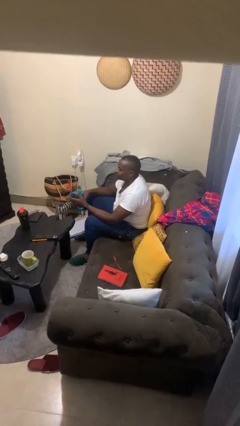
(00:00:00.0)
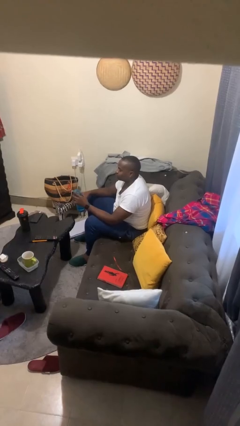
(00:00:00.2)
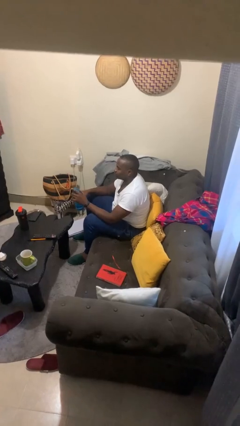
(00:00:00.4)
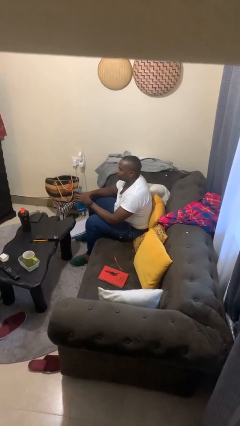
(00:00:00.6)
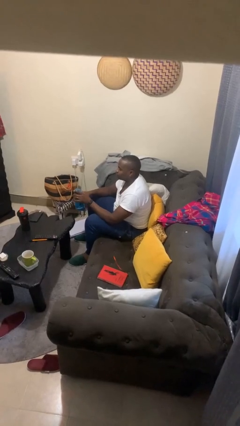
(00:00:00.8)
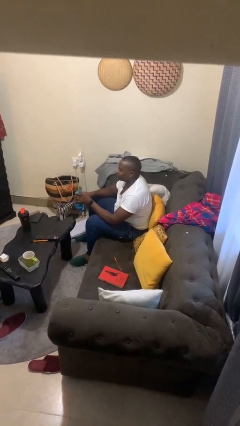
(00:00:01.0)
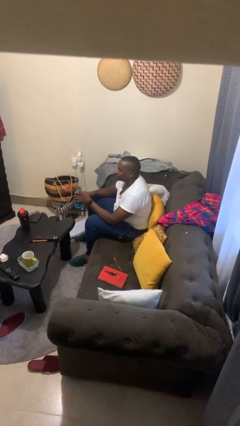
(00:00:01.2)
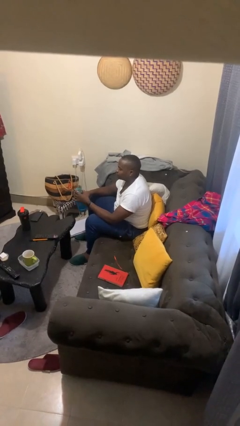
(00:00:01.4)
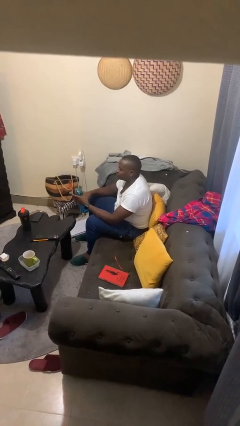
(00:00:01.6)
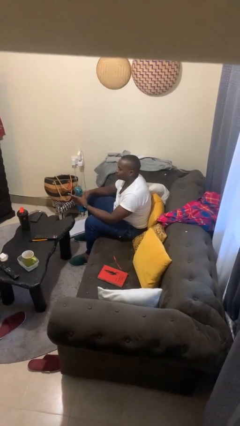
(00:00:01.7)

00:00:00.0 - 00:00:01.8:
person screws lid to bottle

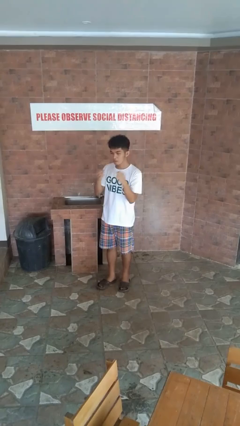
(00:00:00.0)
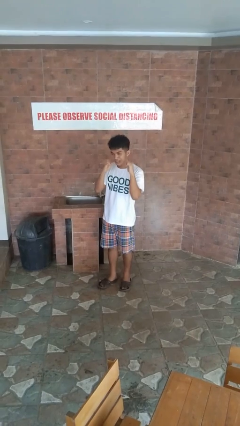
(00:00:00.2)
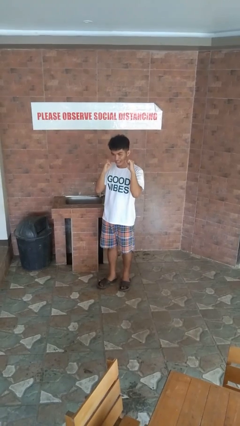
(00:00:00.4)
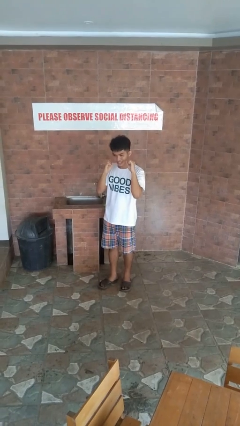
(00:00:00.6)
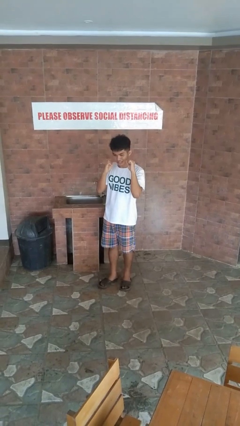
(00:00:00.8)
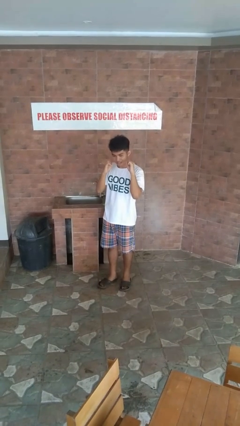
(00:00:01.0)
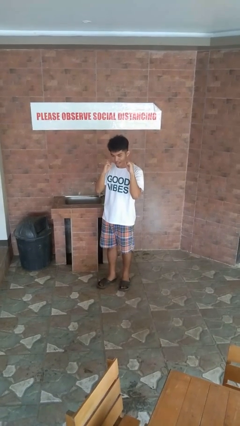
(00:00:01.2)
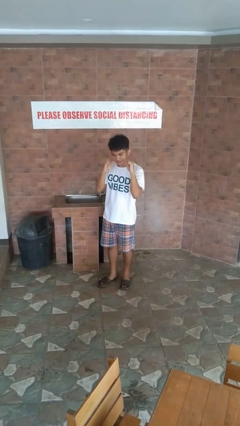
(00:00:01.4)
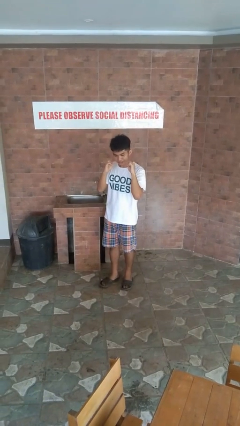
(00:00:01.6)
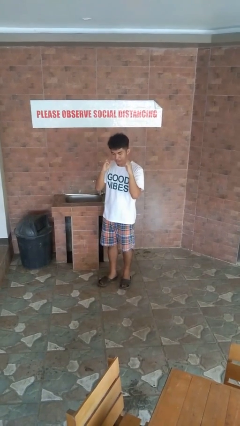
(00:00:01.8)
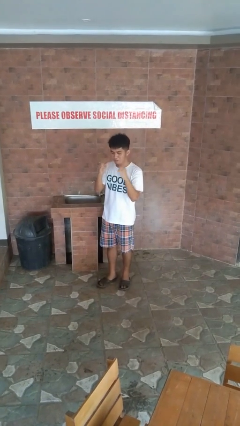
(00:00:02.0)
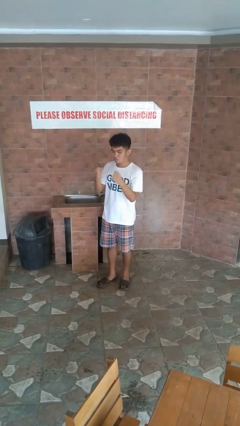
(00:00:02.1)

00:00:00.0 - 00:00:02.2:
person flosses

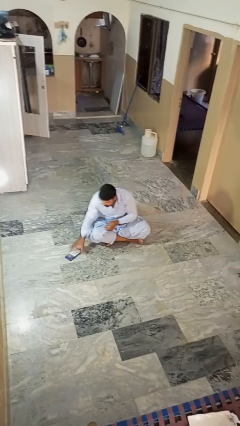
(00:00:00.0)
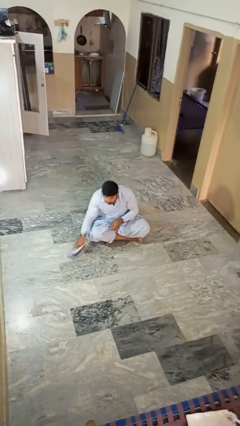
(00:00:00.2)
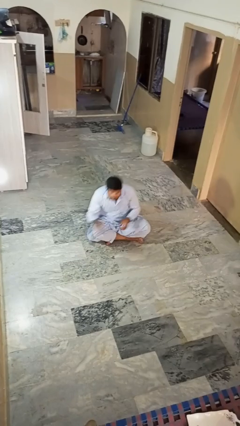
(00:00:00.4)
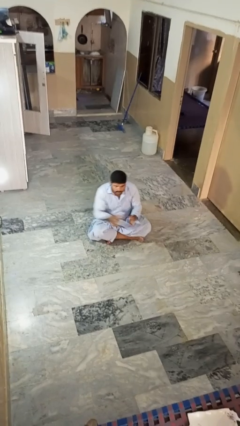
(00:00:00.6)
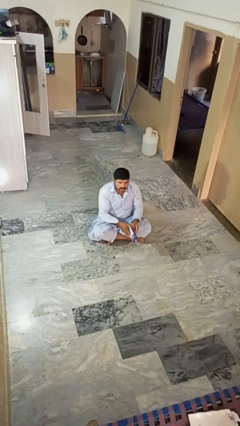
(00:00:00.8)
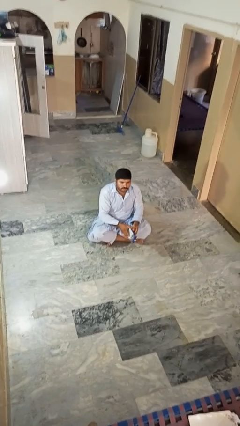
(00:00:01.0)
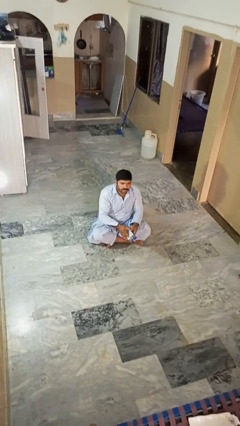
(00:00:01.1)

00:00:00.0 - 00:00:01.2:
person picks up object from floor

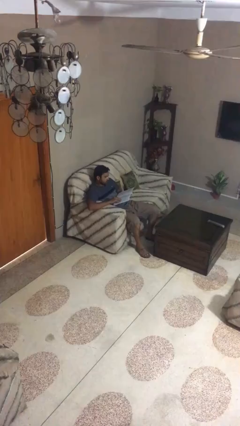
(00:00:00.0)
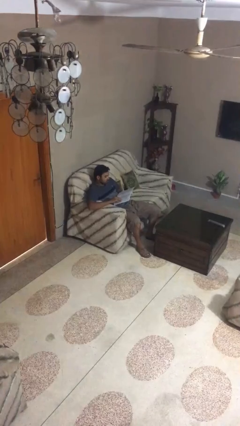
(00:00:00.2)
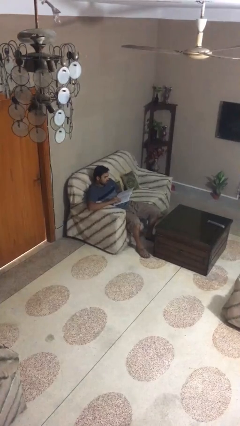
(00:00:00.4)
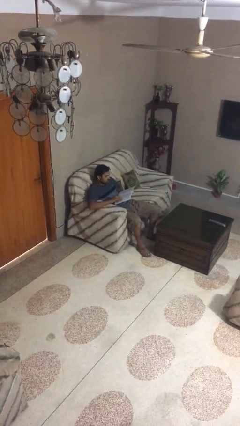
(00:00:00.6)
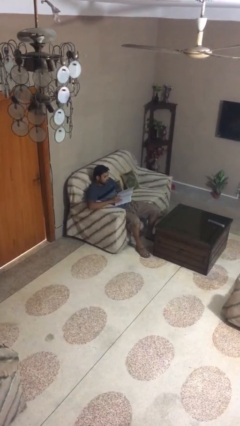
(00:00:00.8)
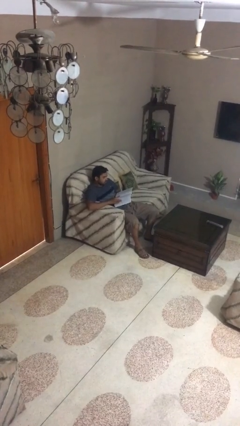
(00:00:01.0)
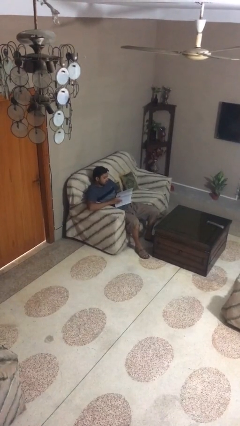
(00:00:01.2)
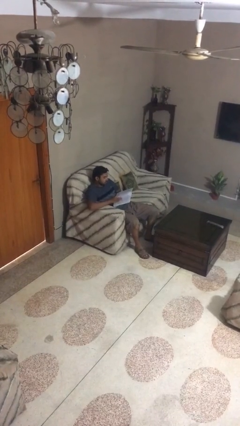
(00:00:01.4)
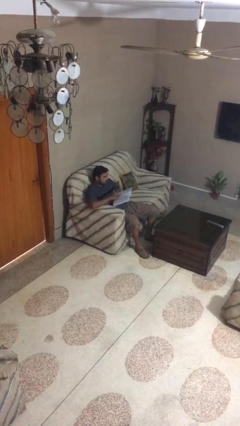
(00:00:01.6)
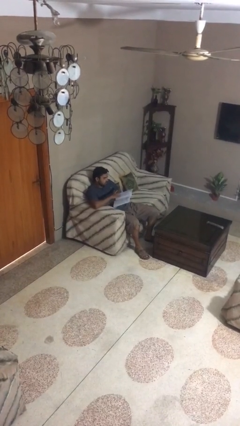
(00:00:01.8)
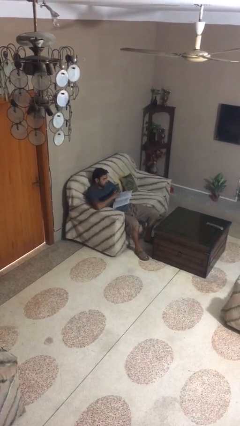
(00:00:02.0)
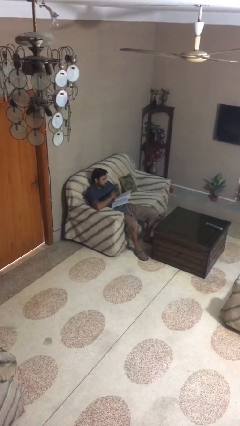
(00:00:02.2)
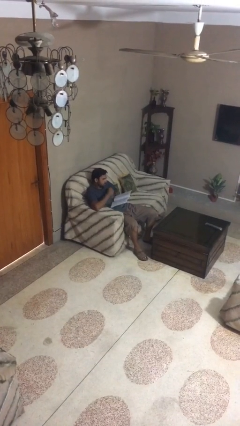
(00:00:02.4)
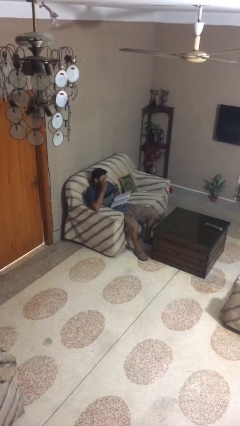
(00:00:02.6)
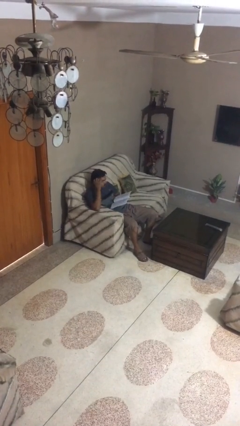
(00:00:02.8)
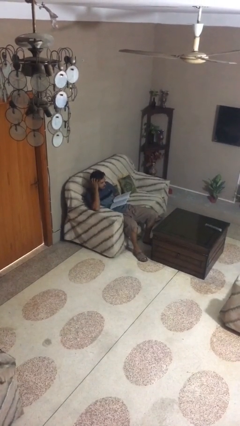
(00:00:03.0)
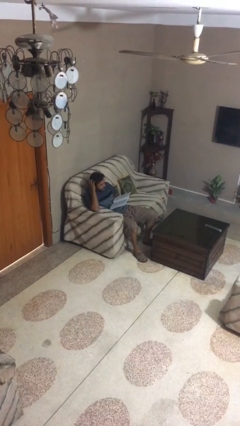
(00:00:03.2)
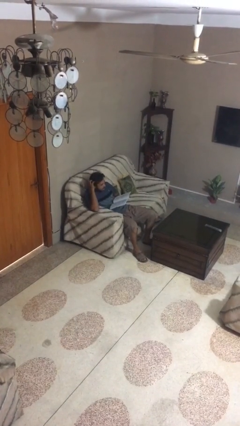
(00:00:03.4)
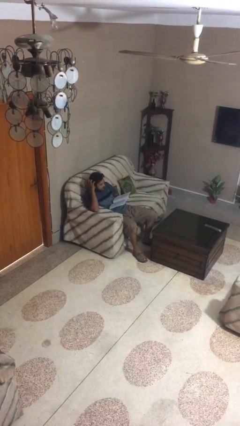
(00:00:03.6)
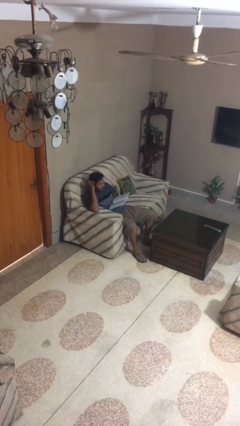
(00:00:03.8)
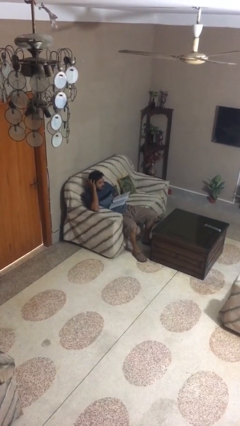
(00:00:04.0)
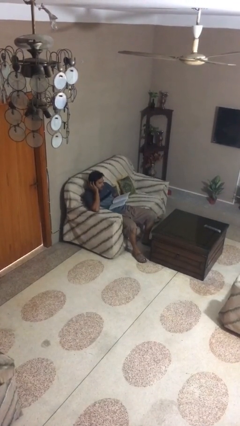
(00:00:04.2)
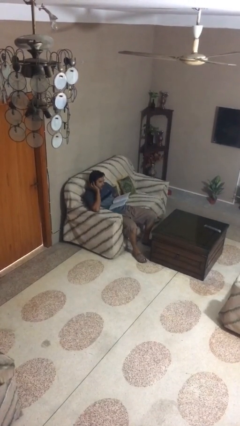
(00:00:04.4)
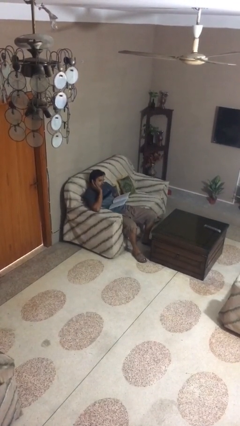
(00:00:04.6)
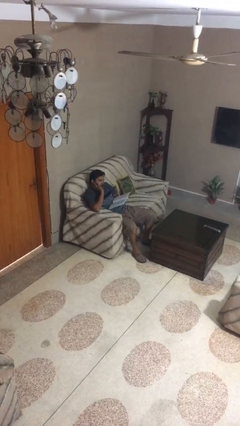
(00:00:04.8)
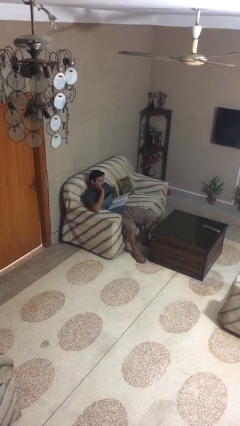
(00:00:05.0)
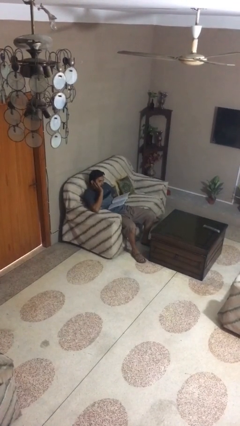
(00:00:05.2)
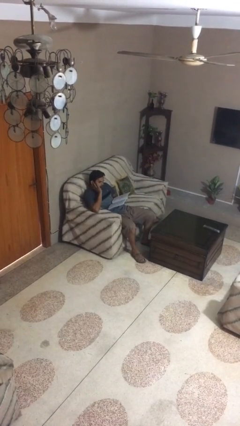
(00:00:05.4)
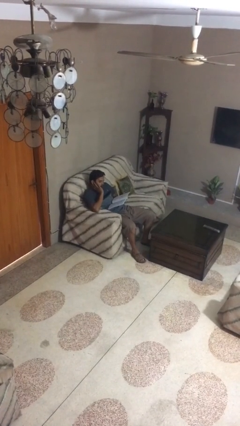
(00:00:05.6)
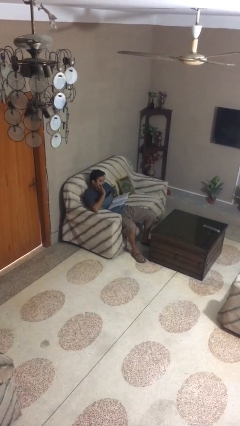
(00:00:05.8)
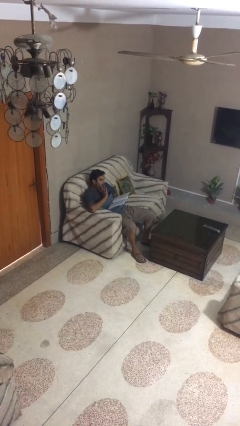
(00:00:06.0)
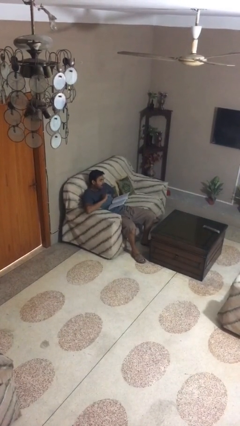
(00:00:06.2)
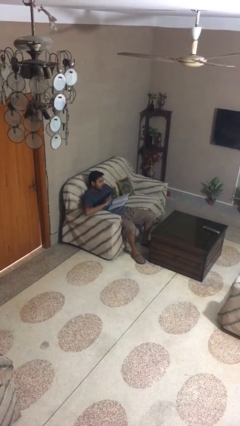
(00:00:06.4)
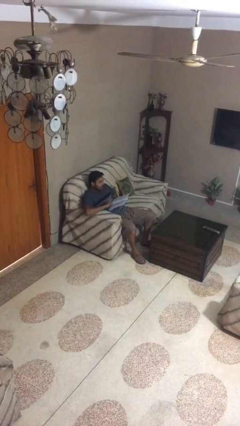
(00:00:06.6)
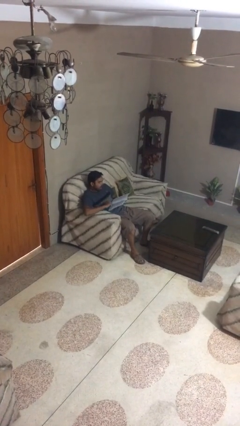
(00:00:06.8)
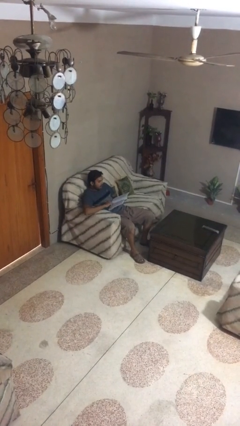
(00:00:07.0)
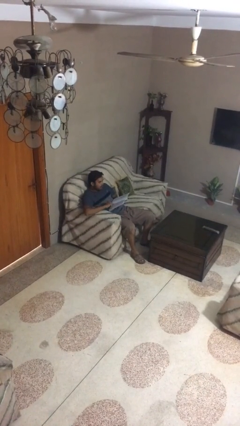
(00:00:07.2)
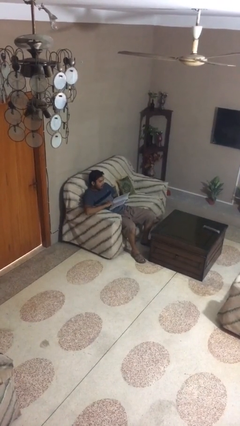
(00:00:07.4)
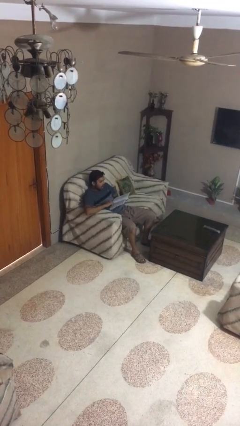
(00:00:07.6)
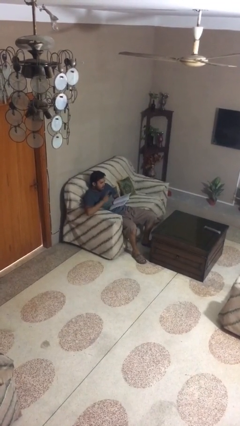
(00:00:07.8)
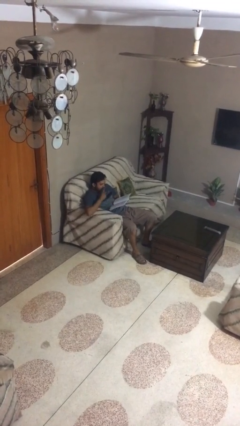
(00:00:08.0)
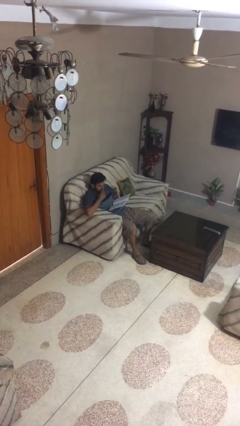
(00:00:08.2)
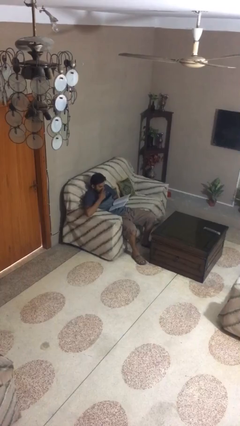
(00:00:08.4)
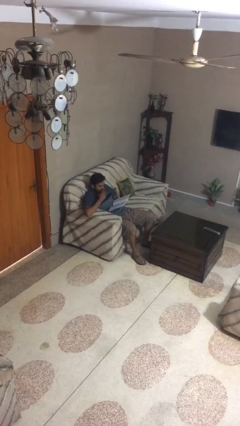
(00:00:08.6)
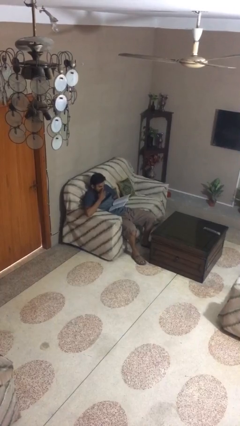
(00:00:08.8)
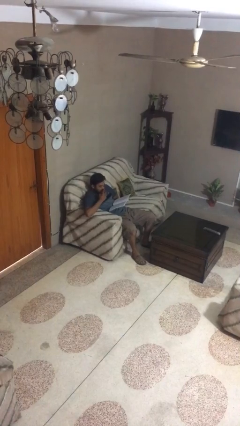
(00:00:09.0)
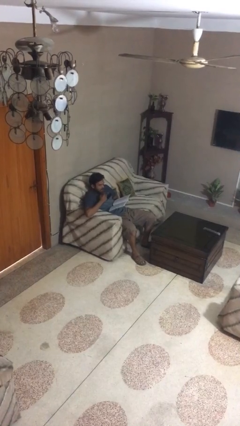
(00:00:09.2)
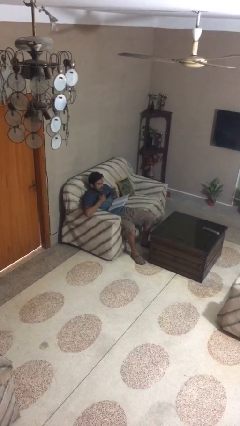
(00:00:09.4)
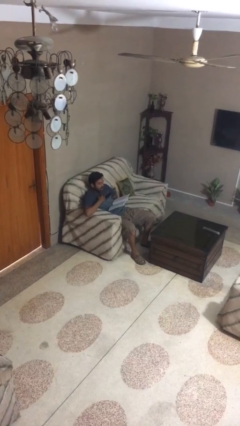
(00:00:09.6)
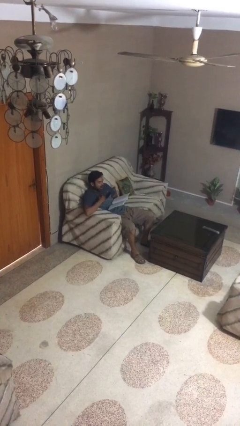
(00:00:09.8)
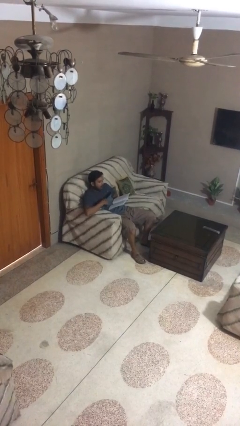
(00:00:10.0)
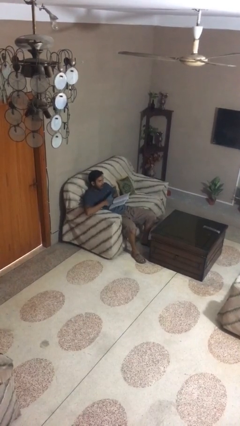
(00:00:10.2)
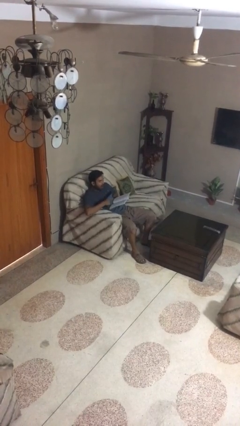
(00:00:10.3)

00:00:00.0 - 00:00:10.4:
person reads document

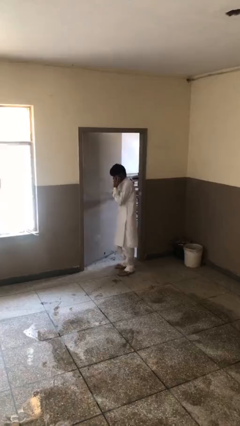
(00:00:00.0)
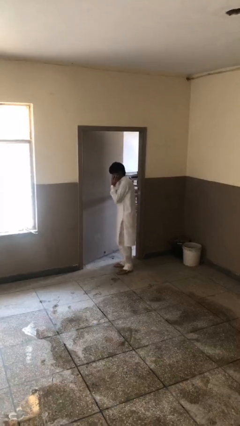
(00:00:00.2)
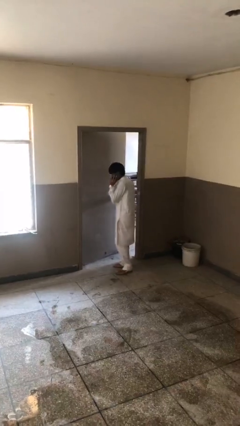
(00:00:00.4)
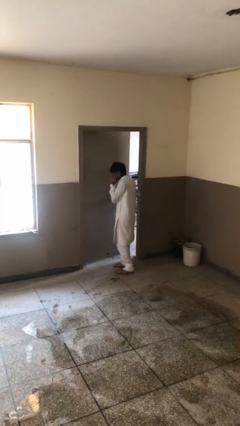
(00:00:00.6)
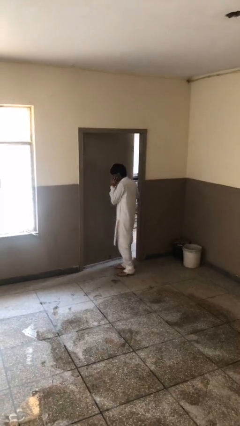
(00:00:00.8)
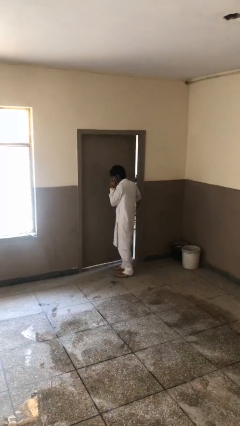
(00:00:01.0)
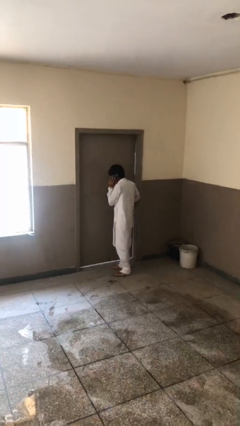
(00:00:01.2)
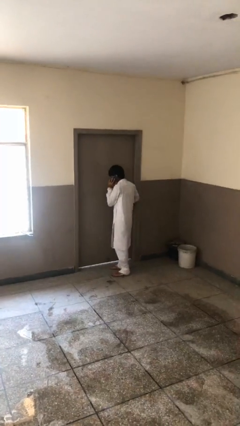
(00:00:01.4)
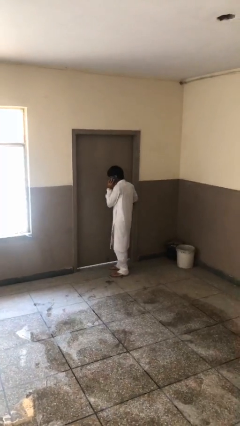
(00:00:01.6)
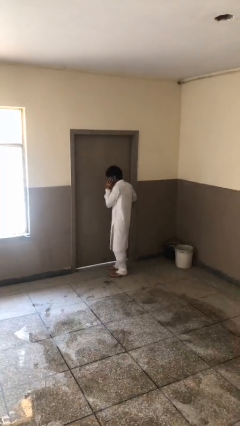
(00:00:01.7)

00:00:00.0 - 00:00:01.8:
person closes facility door
